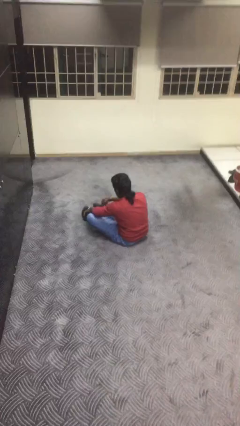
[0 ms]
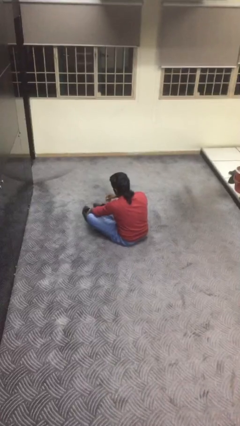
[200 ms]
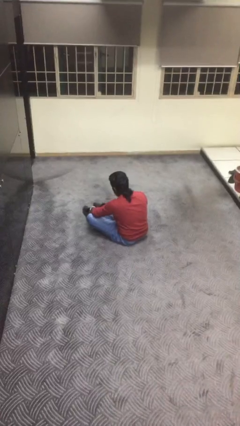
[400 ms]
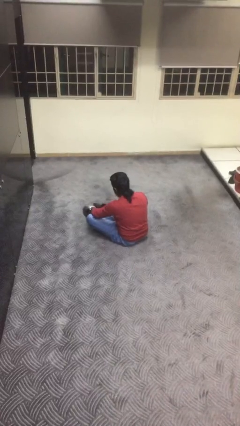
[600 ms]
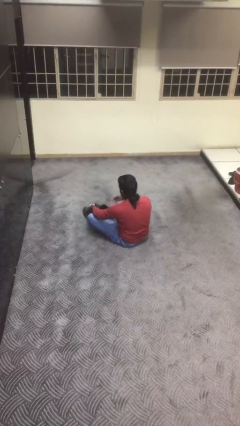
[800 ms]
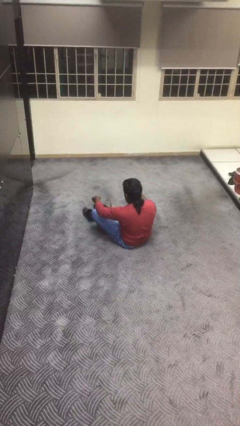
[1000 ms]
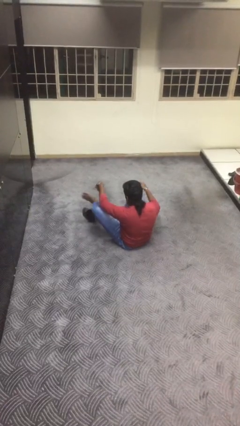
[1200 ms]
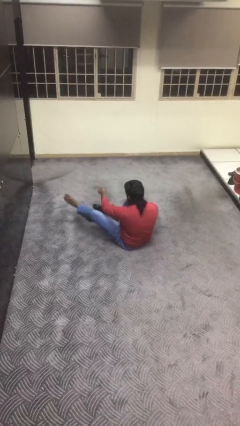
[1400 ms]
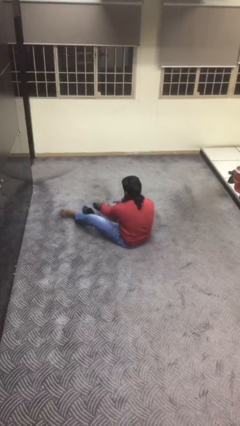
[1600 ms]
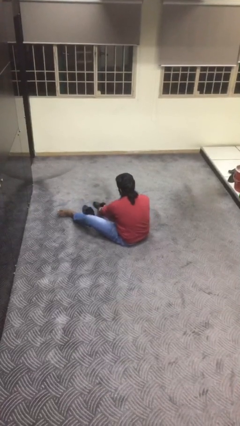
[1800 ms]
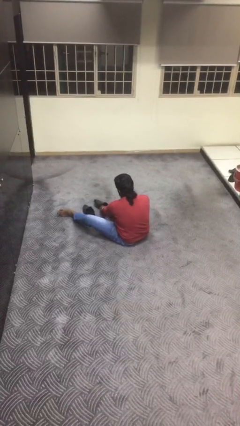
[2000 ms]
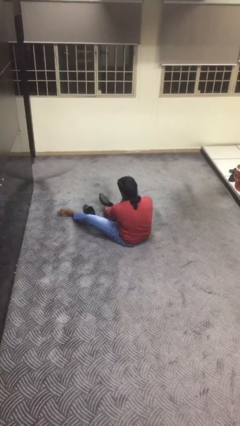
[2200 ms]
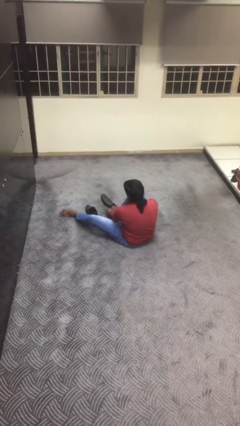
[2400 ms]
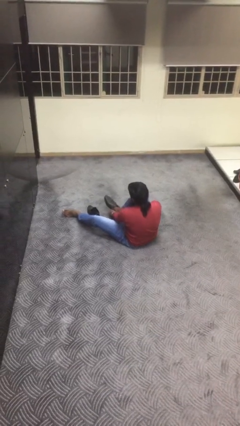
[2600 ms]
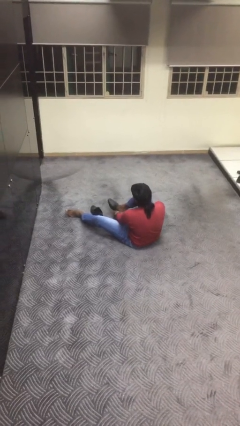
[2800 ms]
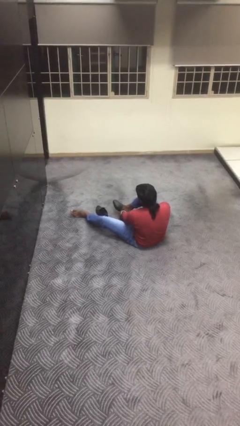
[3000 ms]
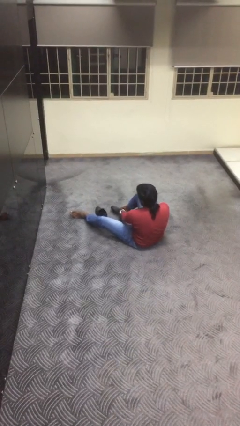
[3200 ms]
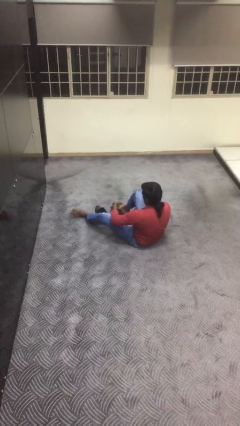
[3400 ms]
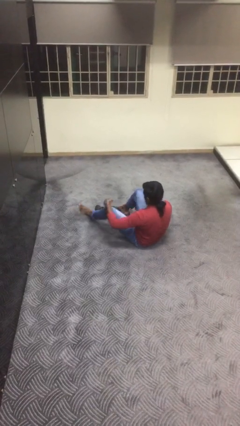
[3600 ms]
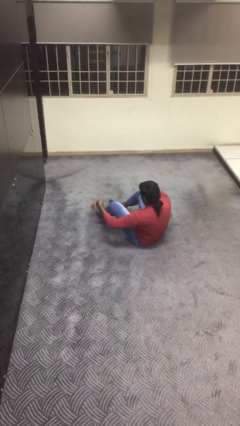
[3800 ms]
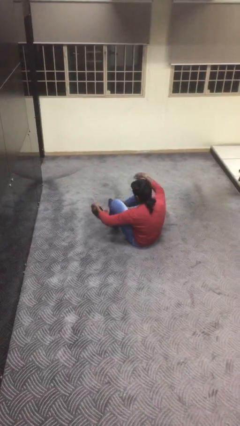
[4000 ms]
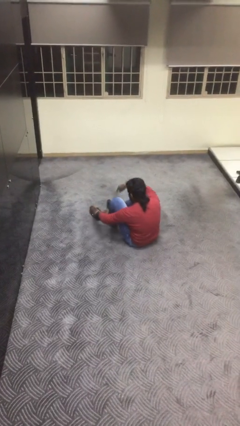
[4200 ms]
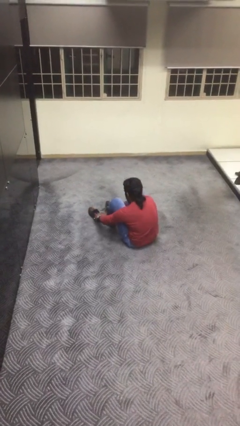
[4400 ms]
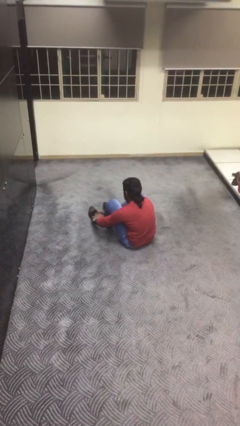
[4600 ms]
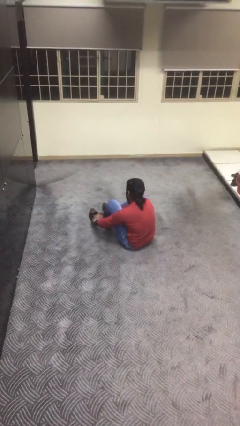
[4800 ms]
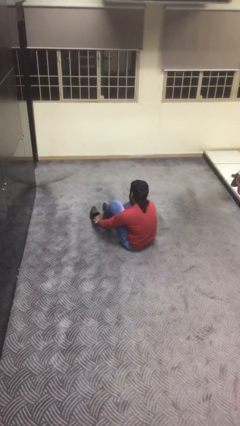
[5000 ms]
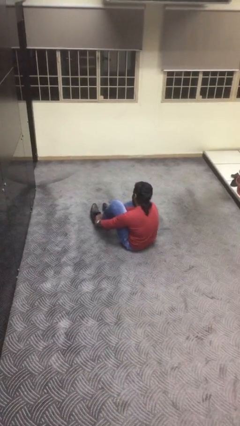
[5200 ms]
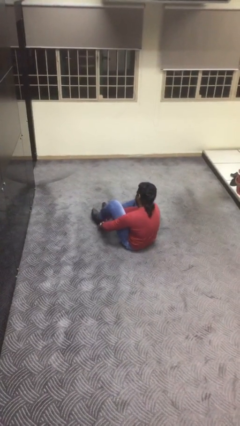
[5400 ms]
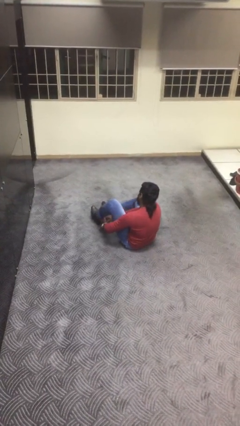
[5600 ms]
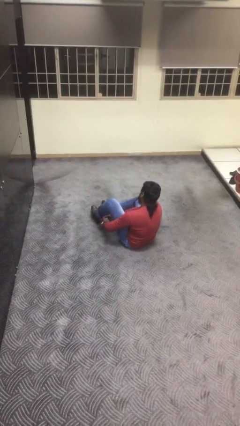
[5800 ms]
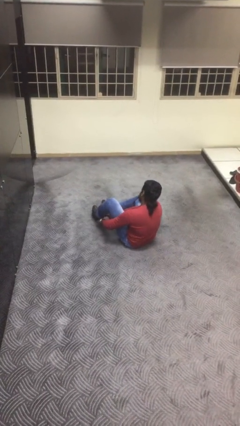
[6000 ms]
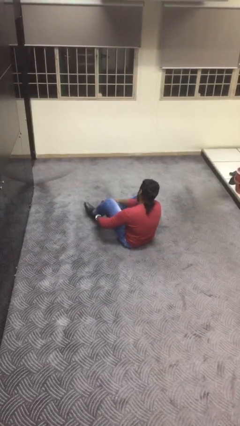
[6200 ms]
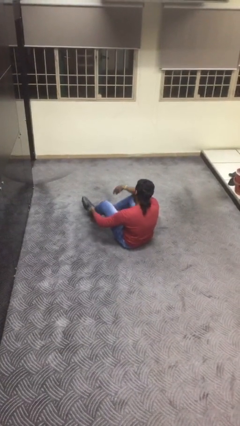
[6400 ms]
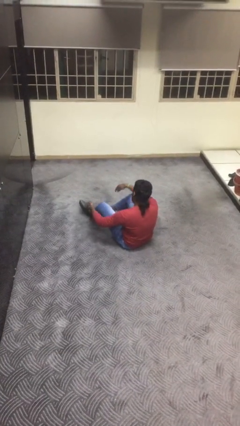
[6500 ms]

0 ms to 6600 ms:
person puts on shoes

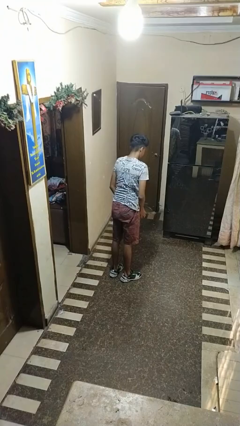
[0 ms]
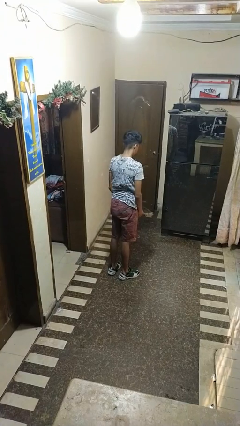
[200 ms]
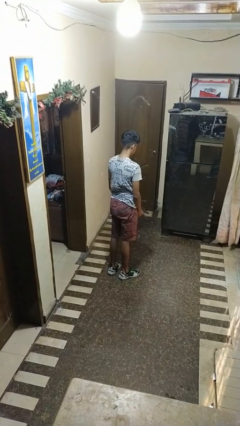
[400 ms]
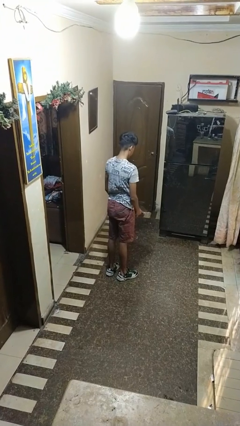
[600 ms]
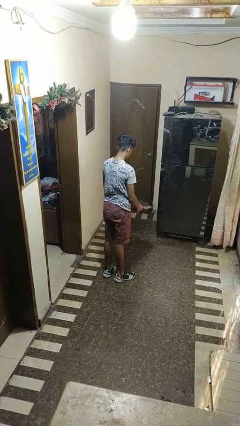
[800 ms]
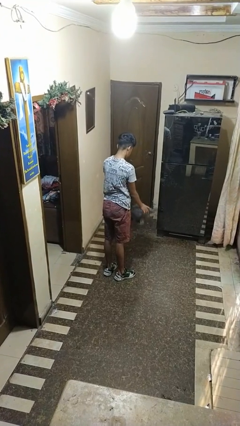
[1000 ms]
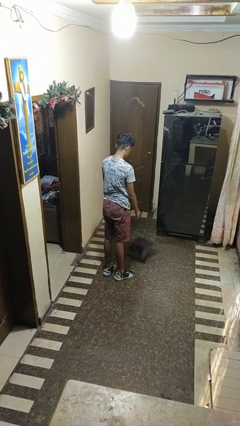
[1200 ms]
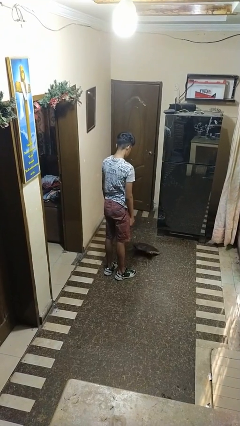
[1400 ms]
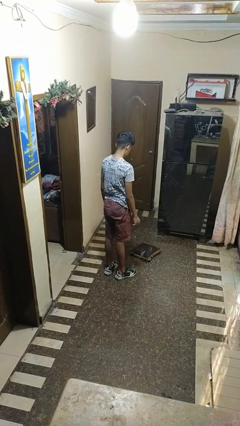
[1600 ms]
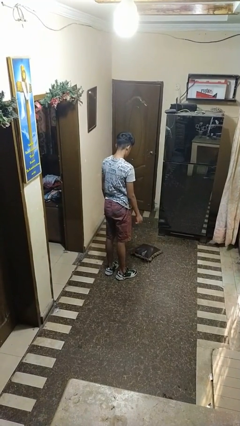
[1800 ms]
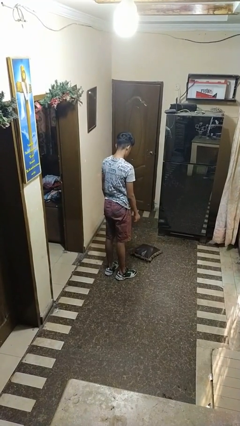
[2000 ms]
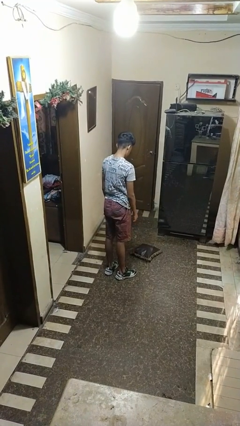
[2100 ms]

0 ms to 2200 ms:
person throws object to ground

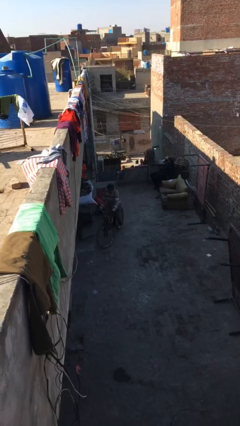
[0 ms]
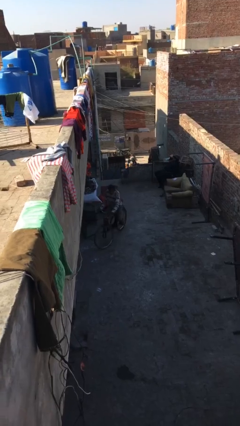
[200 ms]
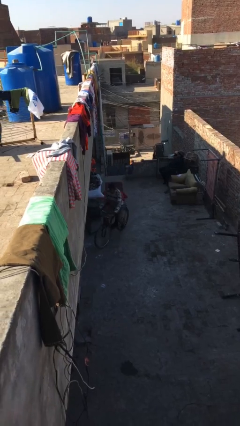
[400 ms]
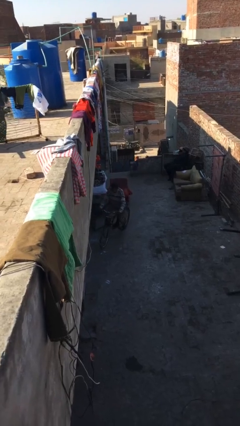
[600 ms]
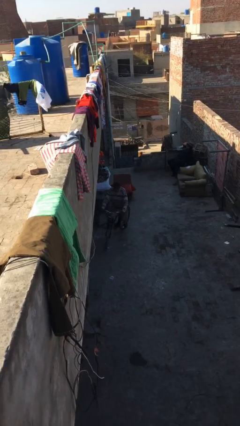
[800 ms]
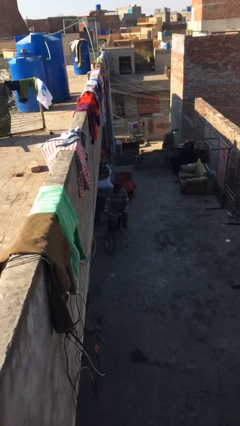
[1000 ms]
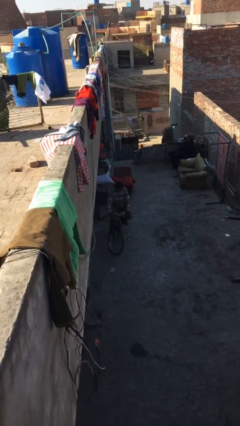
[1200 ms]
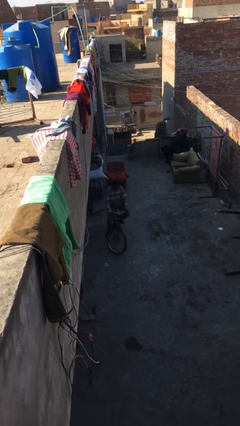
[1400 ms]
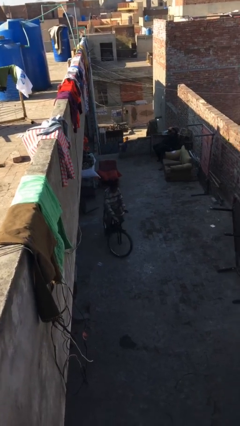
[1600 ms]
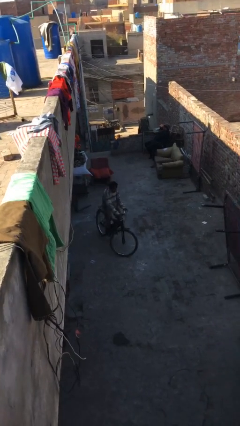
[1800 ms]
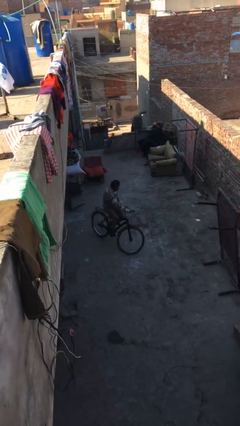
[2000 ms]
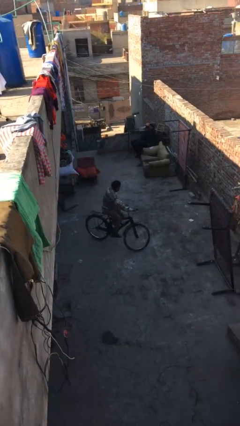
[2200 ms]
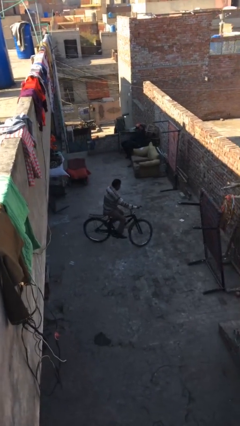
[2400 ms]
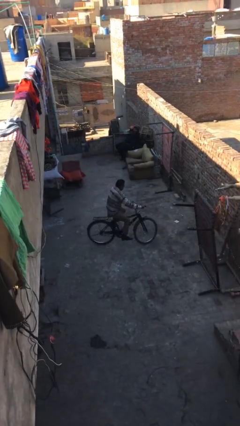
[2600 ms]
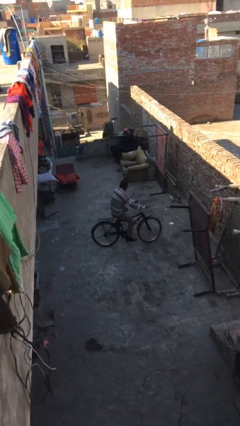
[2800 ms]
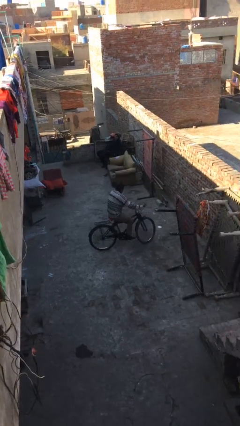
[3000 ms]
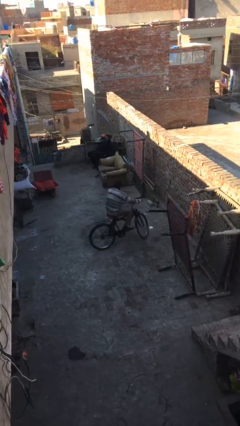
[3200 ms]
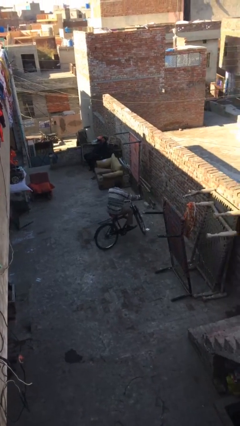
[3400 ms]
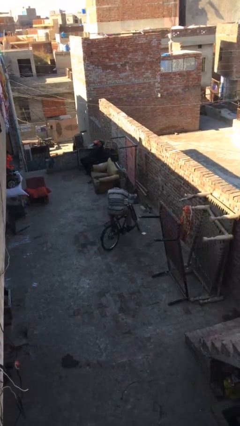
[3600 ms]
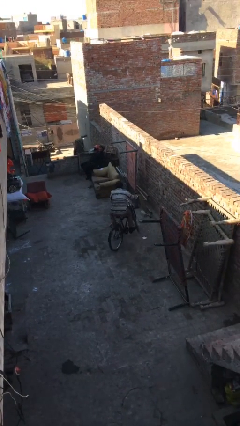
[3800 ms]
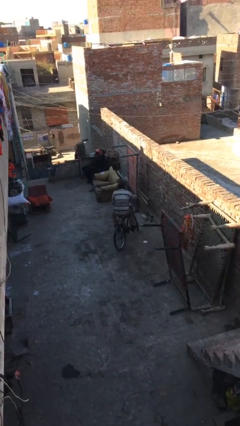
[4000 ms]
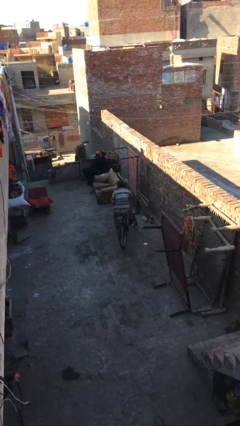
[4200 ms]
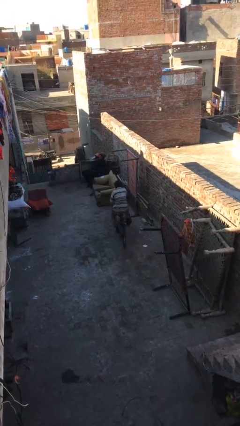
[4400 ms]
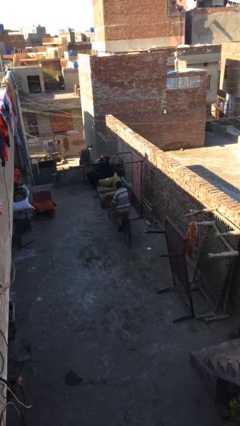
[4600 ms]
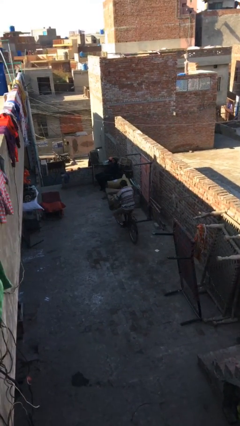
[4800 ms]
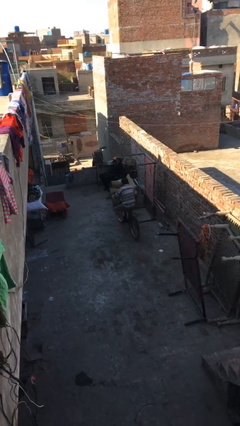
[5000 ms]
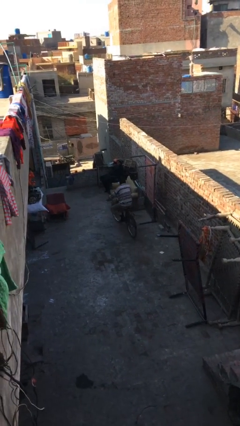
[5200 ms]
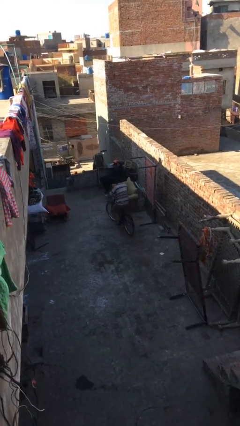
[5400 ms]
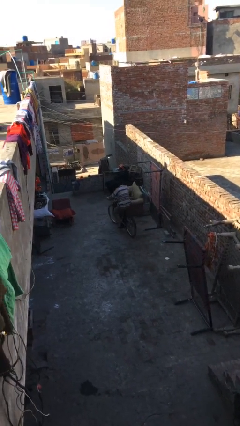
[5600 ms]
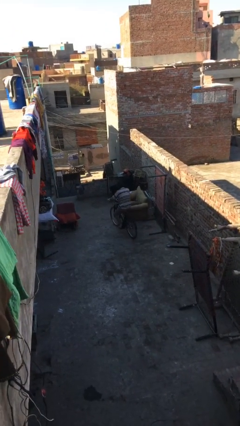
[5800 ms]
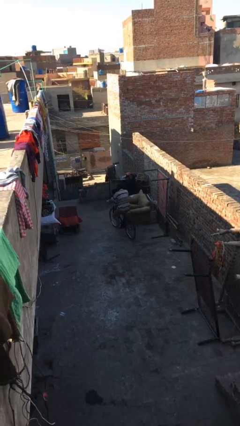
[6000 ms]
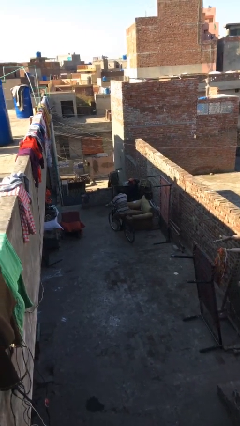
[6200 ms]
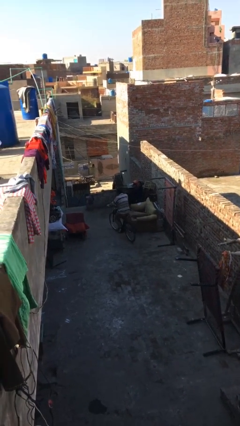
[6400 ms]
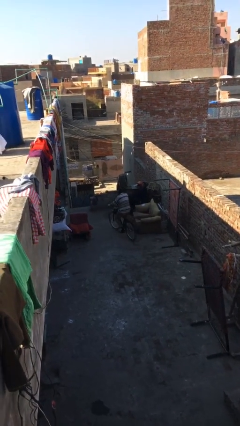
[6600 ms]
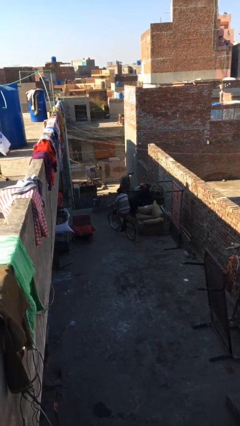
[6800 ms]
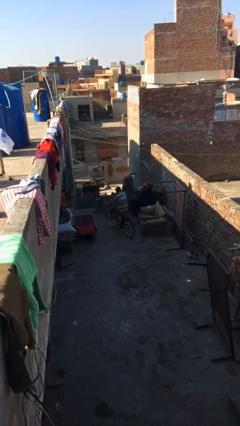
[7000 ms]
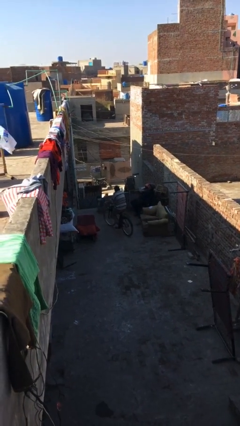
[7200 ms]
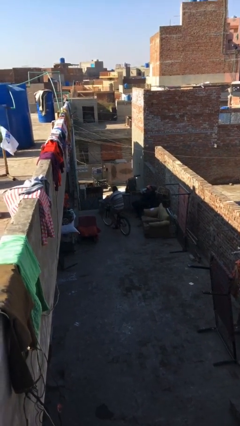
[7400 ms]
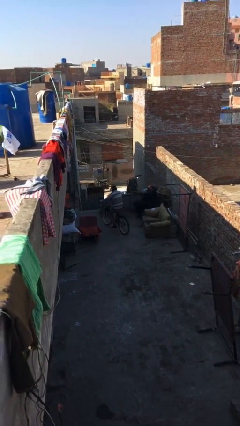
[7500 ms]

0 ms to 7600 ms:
person rides bicycle

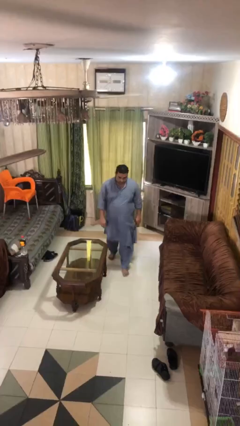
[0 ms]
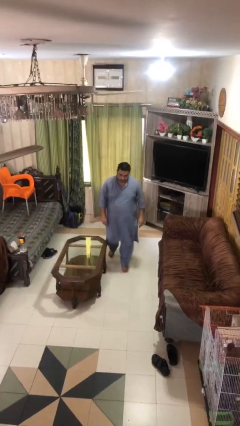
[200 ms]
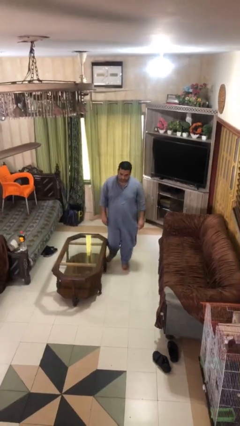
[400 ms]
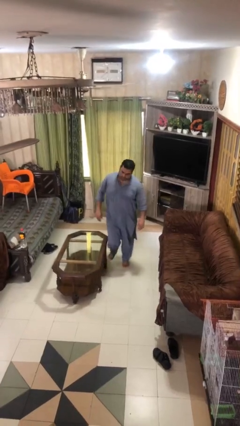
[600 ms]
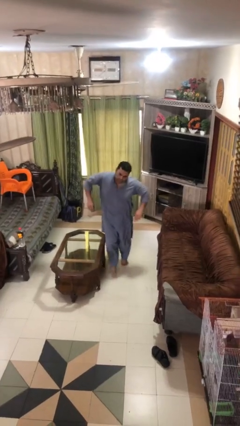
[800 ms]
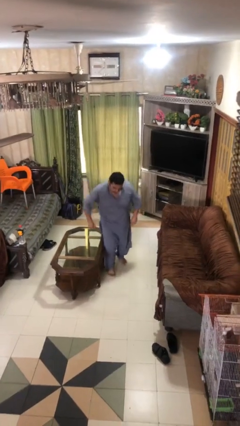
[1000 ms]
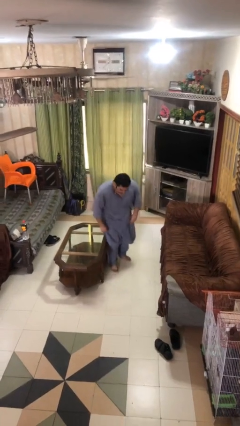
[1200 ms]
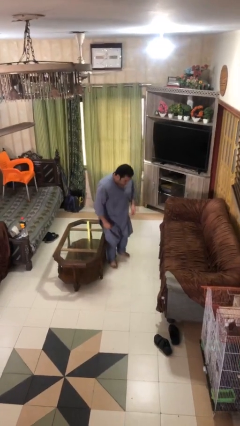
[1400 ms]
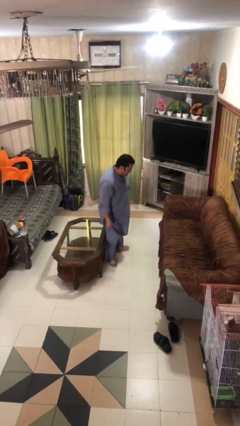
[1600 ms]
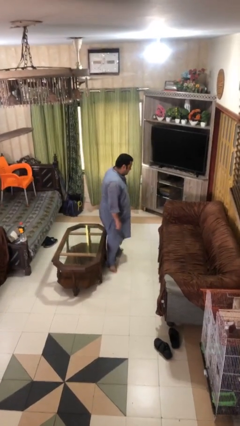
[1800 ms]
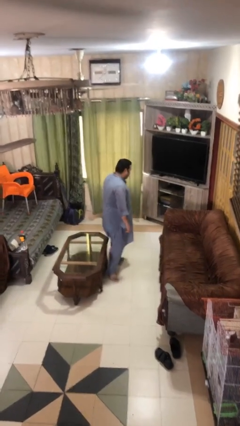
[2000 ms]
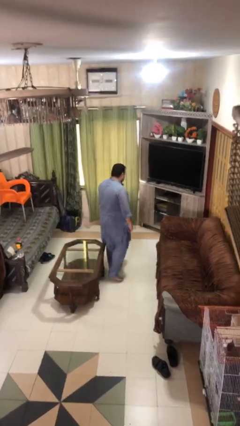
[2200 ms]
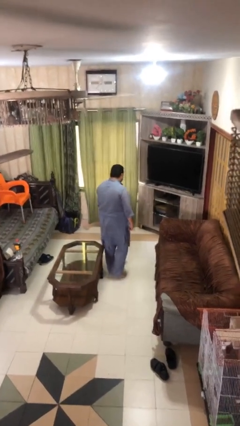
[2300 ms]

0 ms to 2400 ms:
person bumps into table
